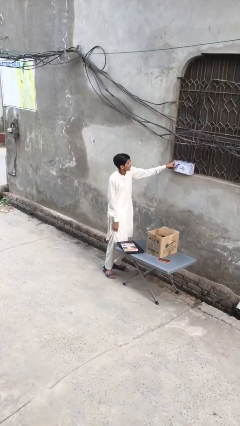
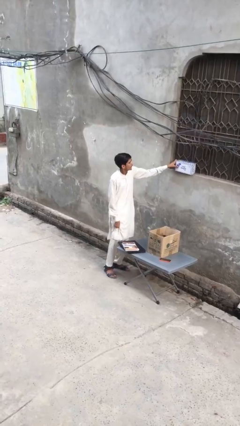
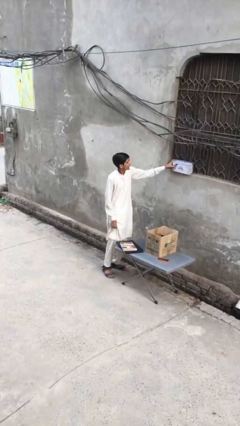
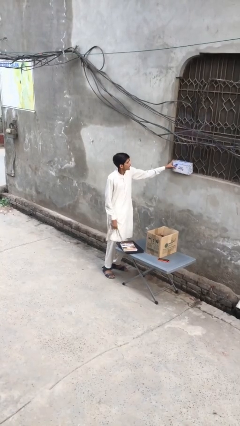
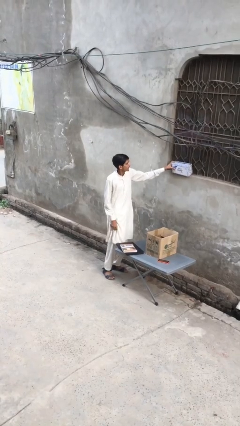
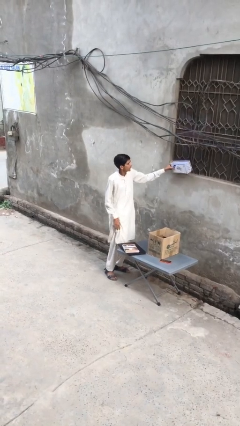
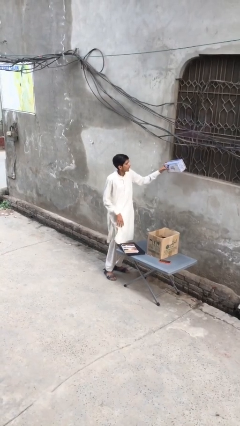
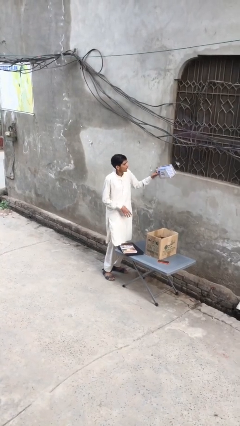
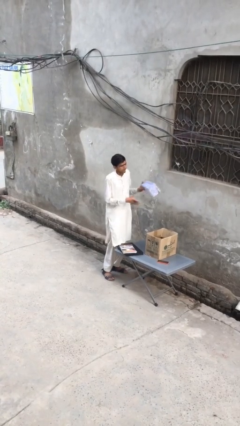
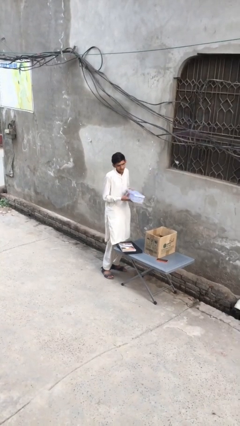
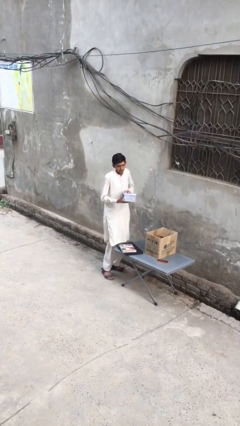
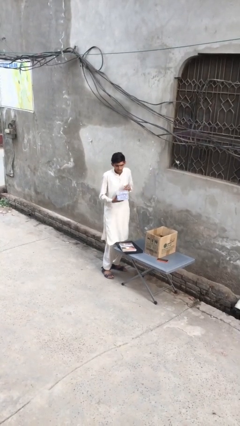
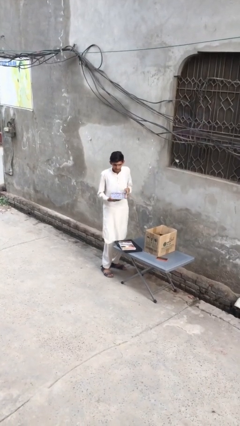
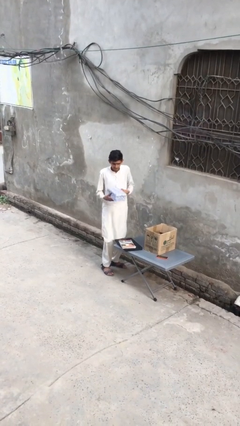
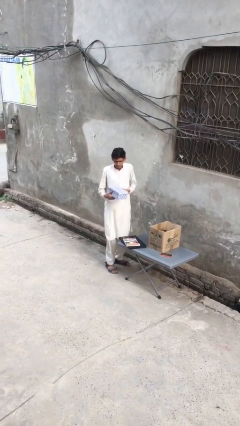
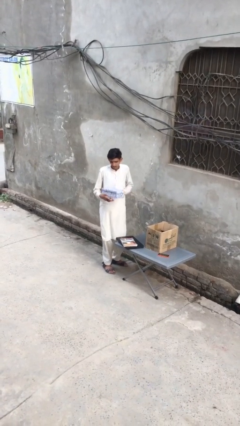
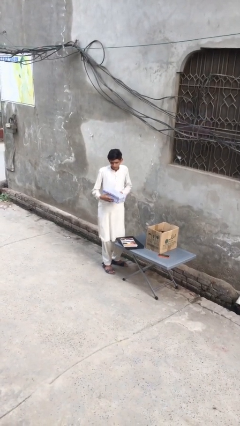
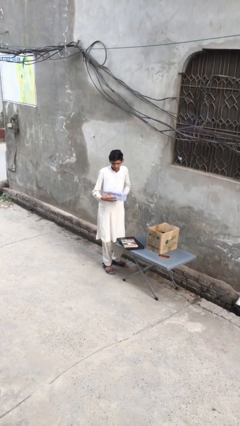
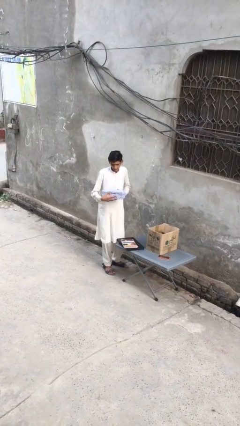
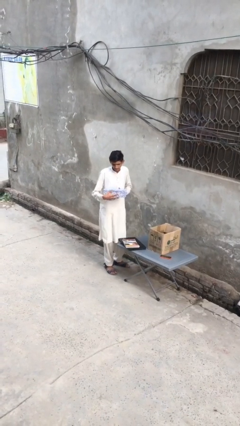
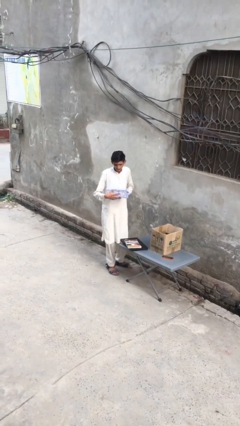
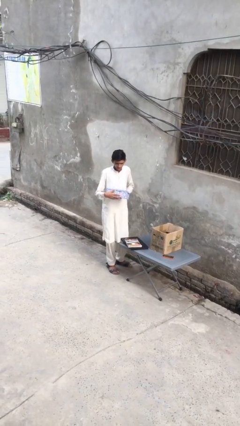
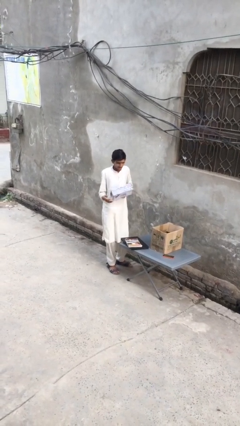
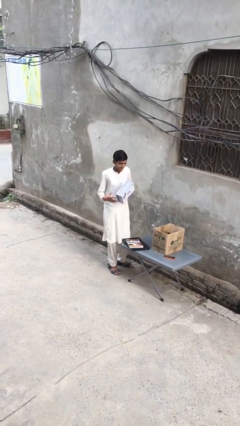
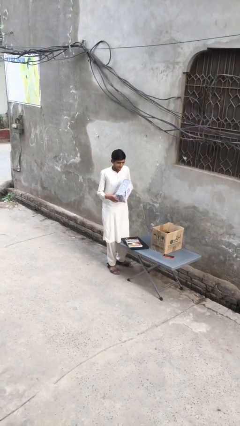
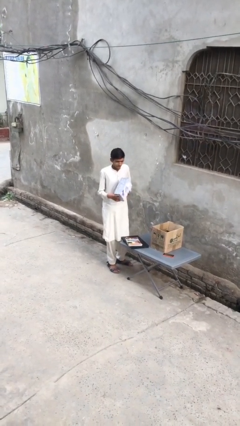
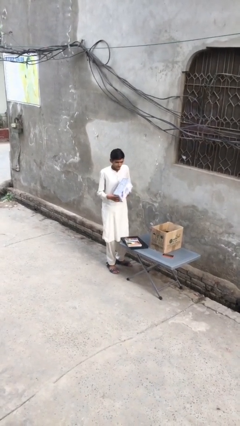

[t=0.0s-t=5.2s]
person picks up object from shelf

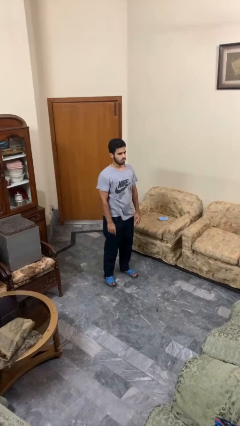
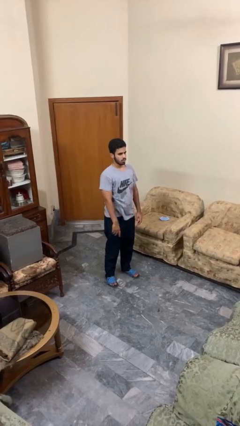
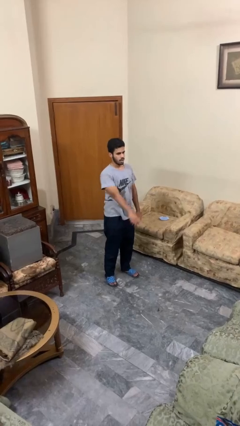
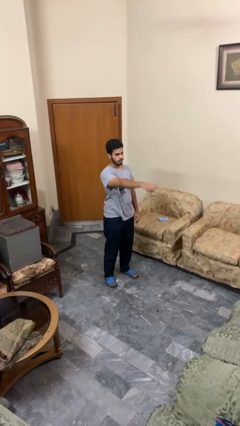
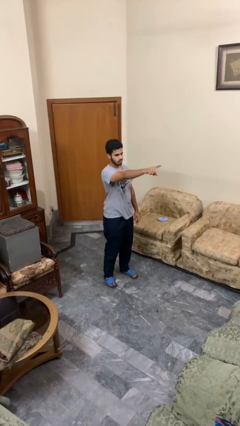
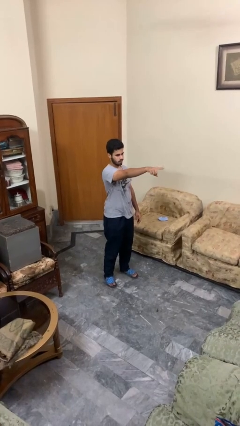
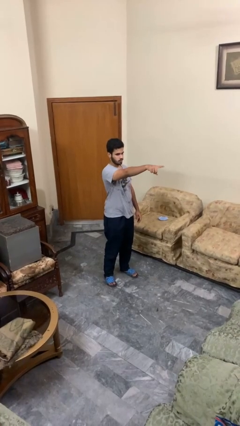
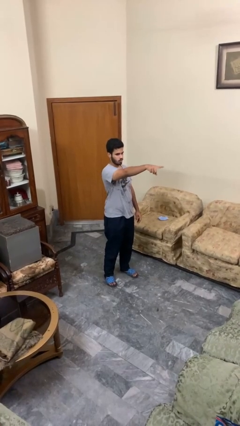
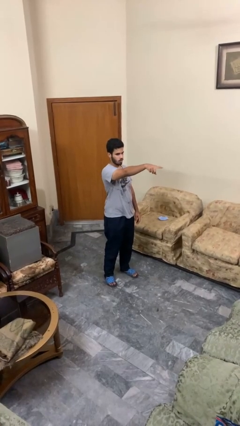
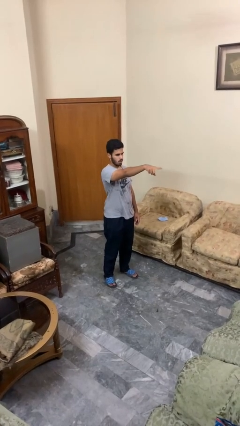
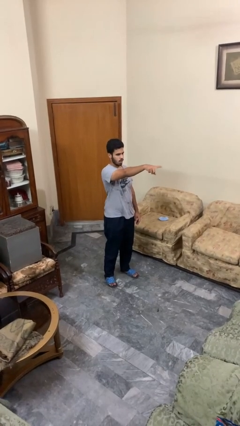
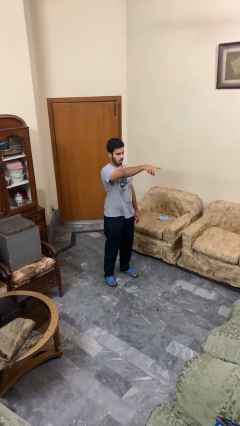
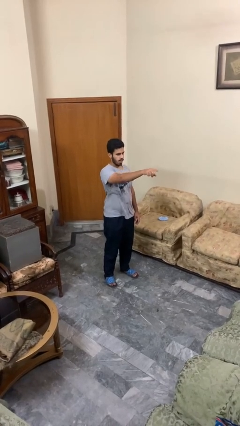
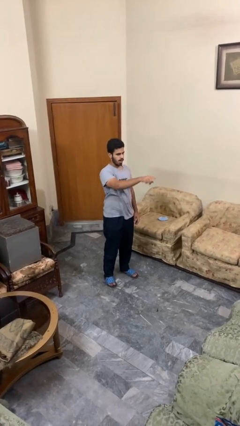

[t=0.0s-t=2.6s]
person points at person

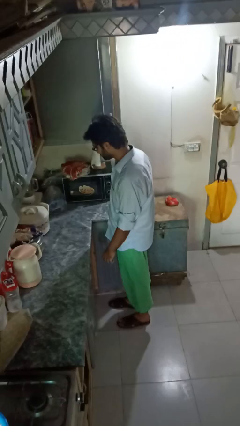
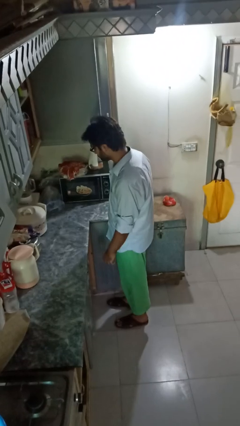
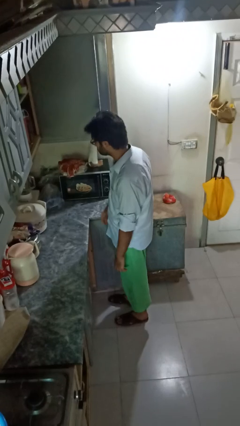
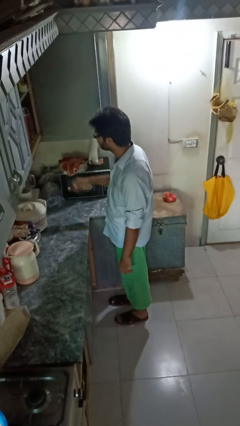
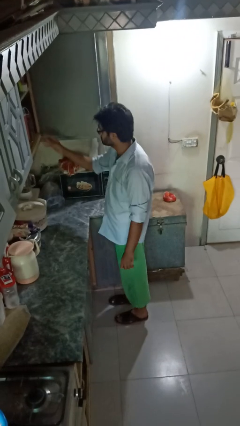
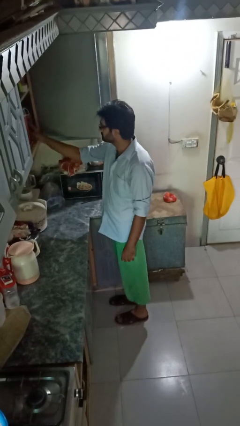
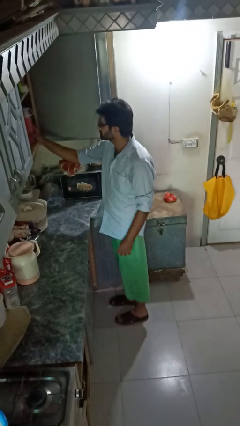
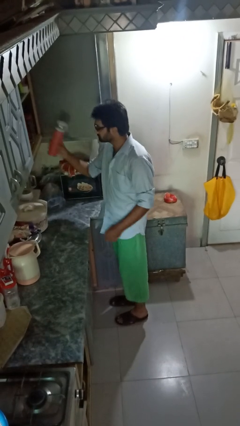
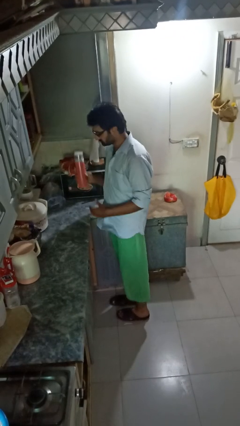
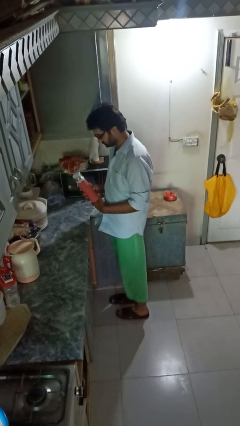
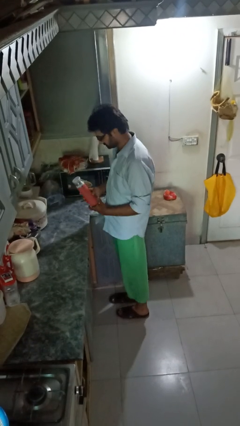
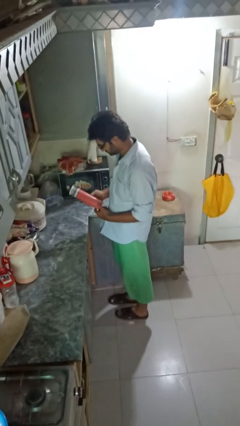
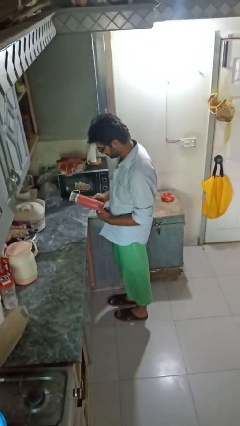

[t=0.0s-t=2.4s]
person picks up object from cabinet

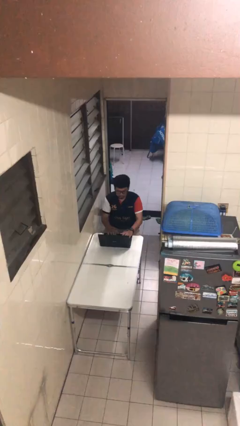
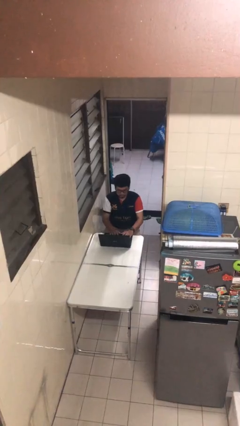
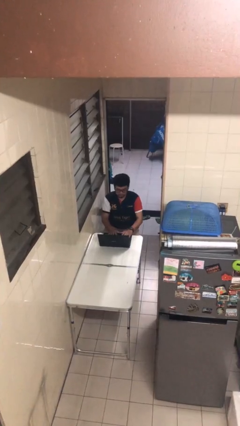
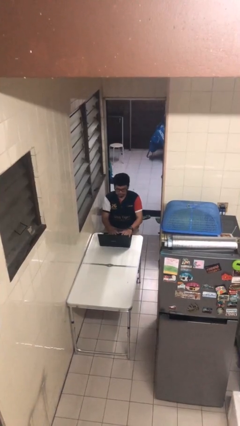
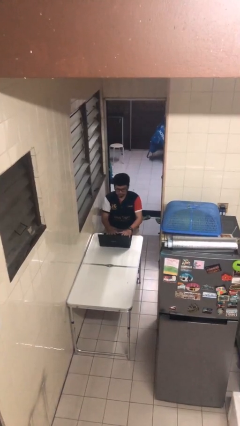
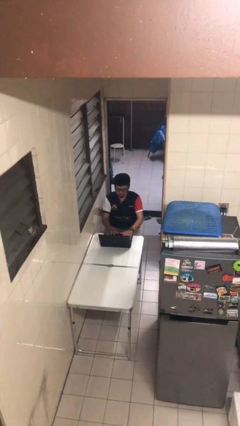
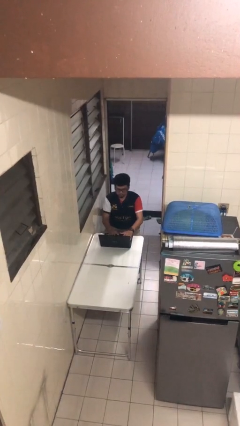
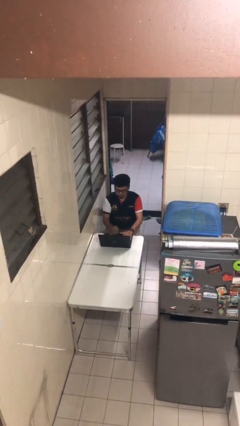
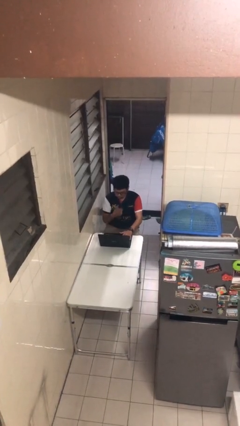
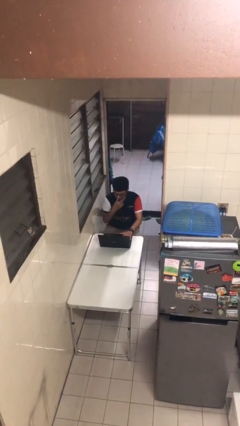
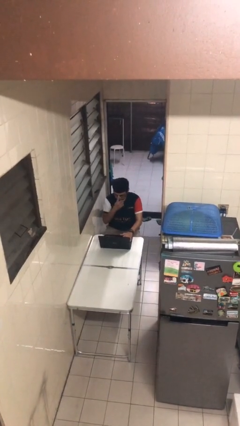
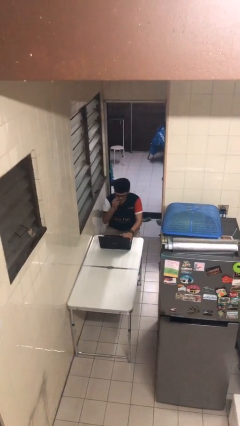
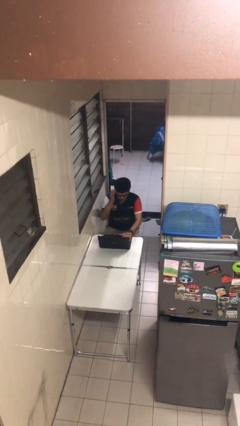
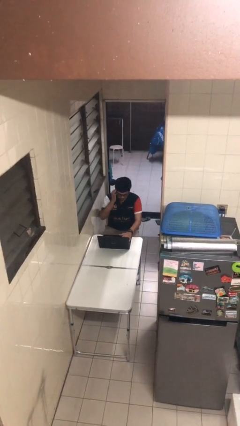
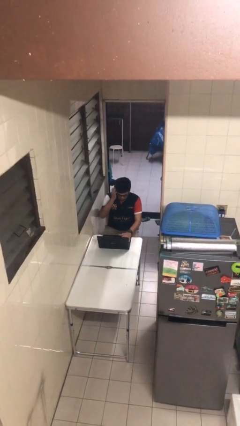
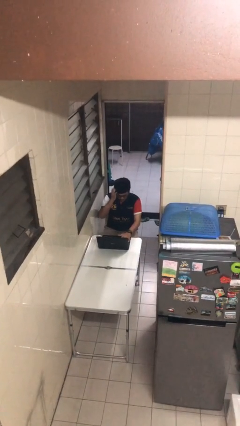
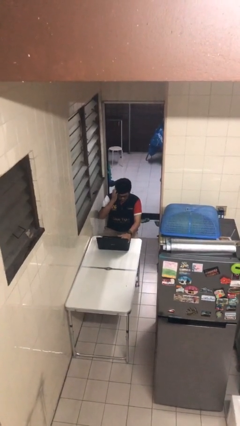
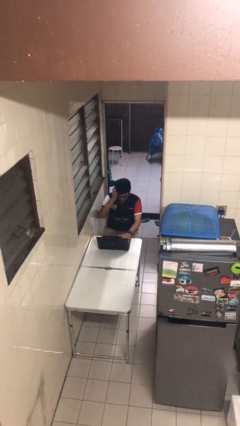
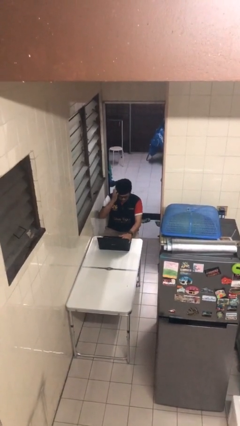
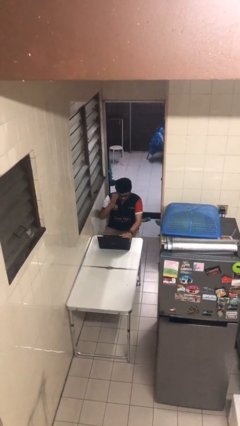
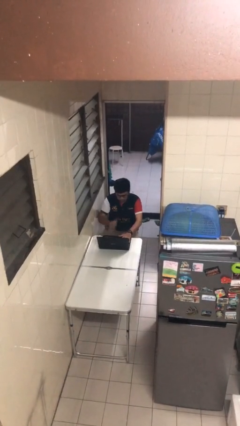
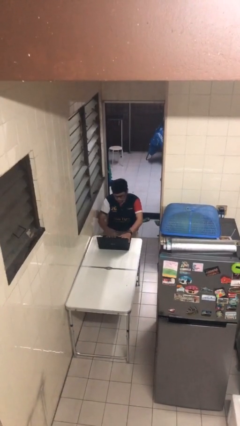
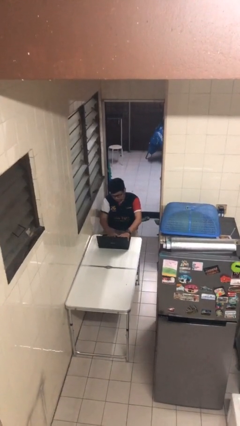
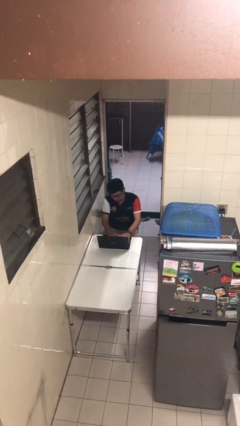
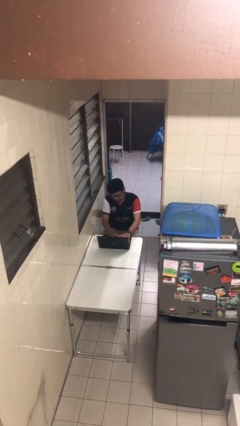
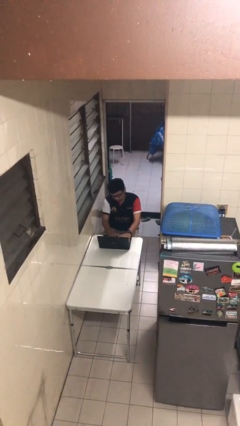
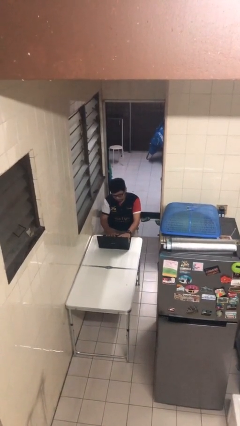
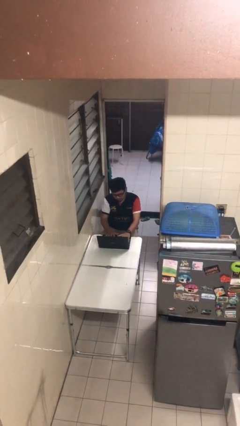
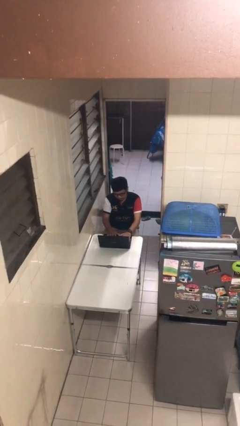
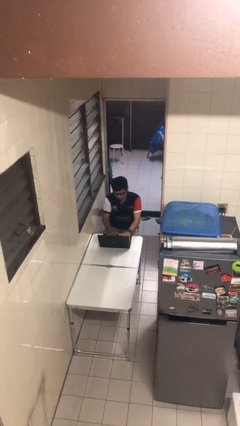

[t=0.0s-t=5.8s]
person interacts with laptop

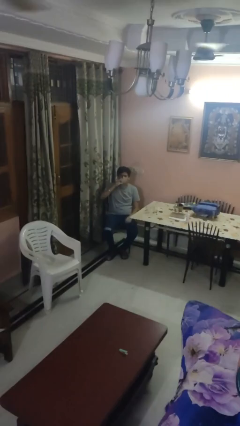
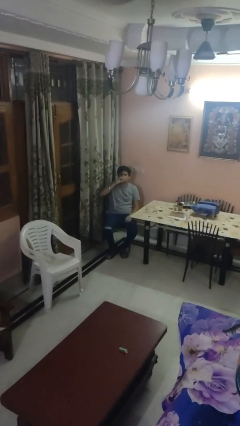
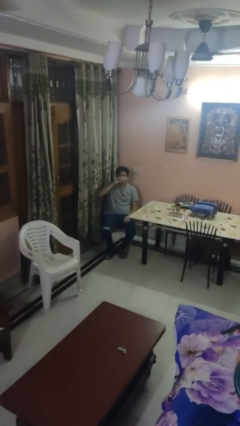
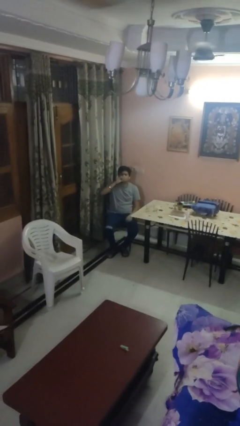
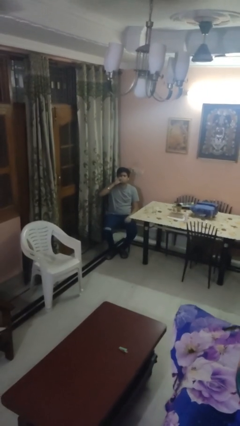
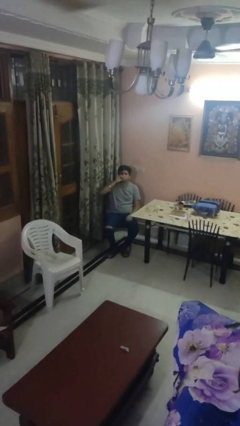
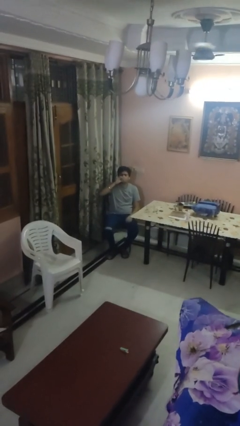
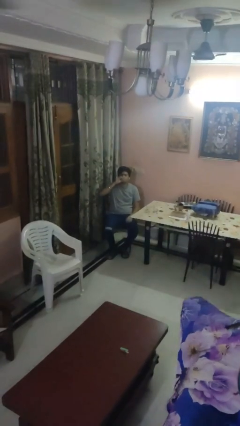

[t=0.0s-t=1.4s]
person drinks from shotglass

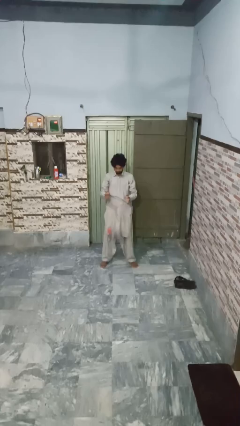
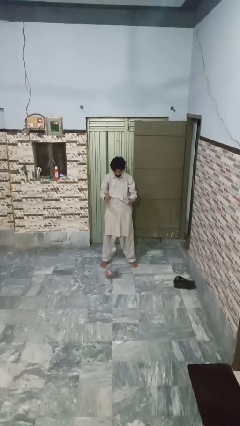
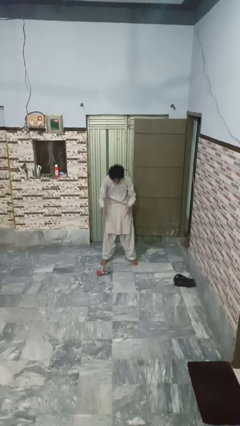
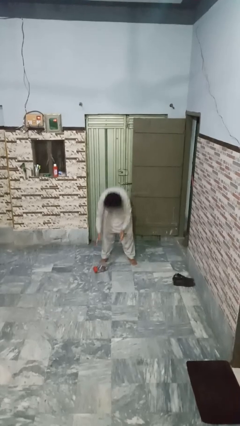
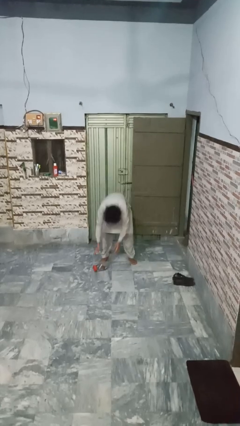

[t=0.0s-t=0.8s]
person catches dropped object
